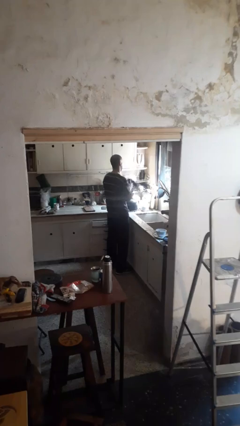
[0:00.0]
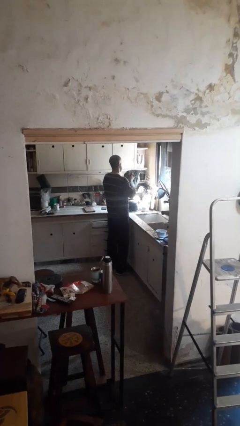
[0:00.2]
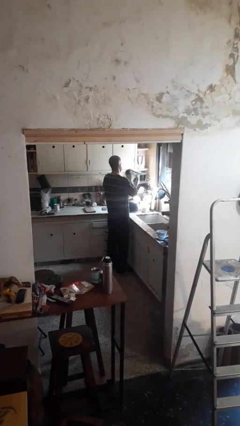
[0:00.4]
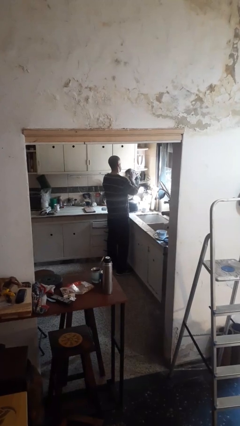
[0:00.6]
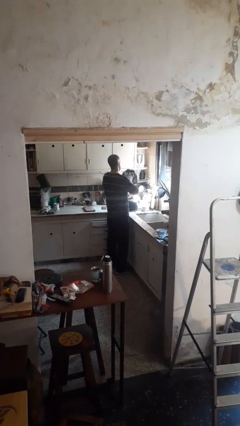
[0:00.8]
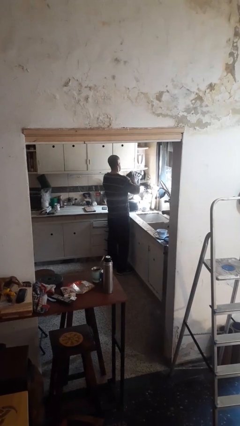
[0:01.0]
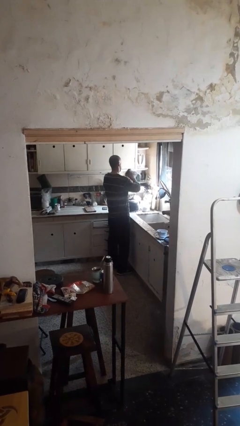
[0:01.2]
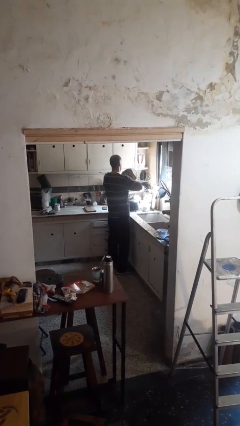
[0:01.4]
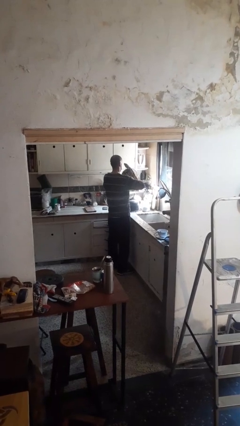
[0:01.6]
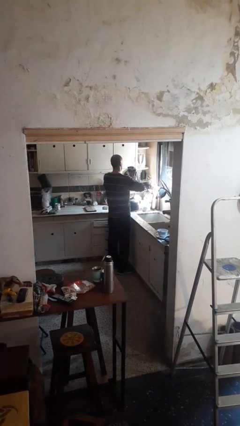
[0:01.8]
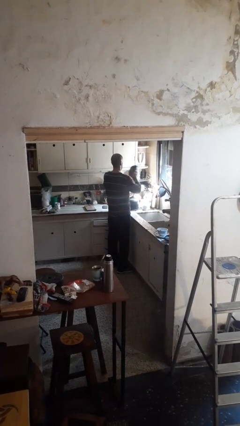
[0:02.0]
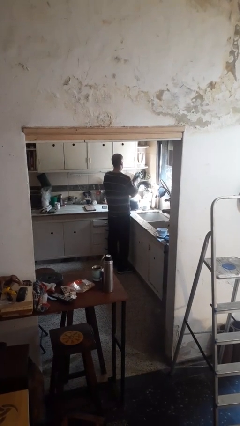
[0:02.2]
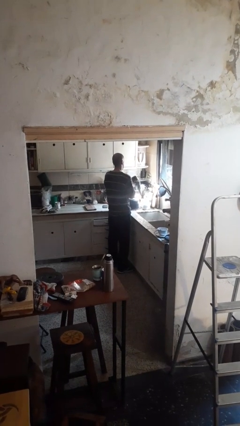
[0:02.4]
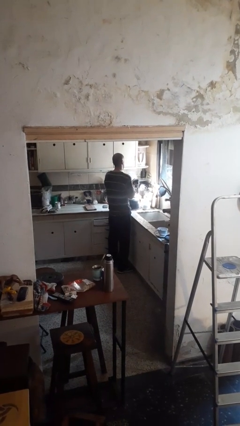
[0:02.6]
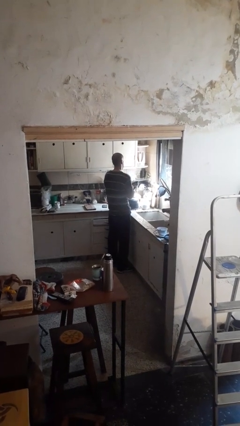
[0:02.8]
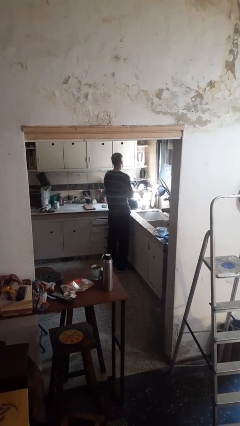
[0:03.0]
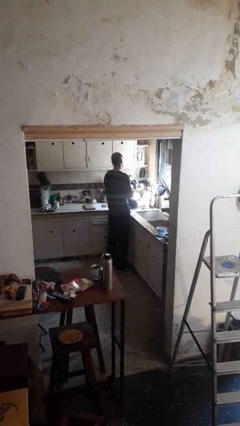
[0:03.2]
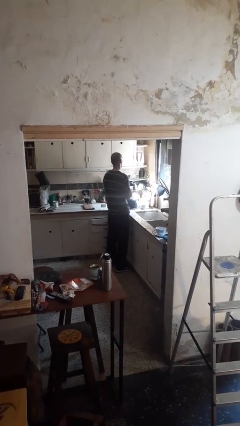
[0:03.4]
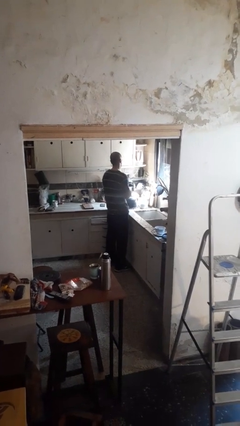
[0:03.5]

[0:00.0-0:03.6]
person dries dish

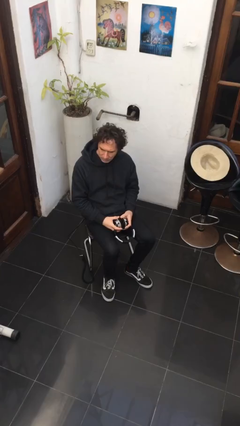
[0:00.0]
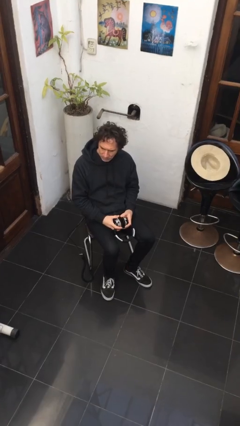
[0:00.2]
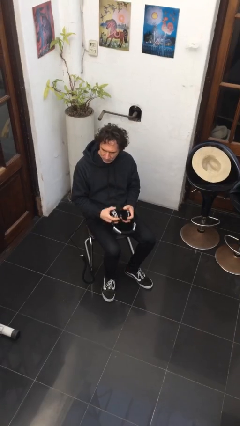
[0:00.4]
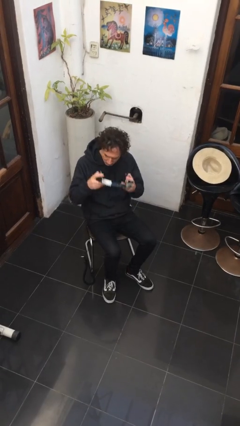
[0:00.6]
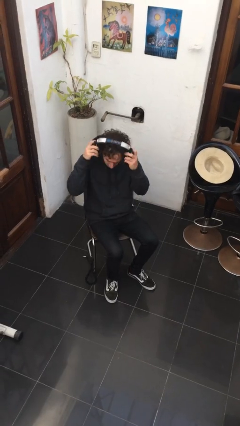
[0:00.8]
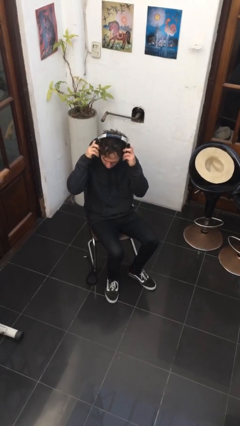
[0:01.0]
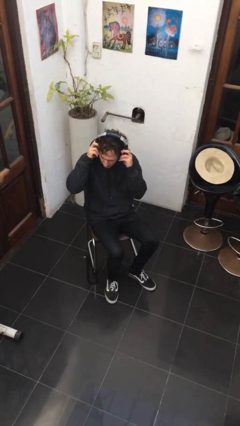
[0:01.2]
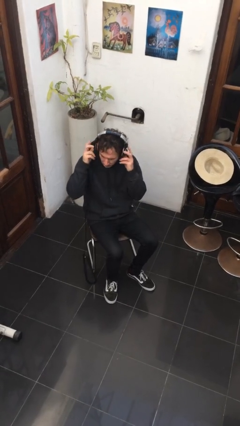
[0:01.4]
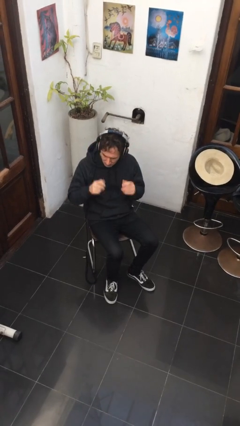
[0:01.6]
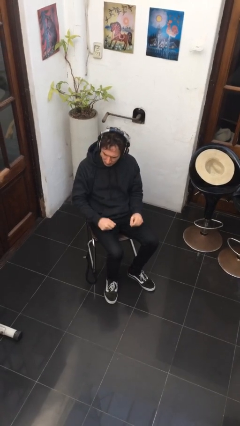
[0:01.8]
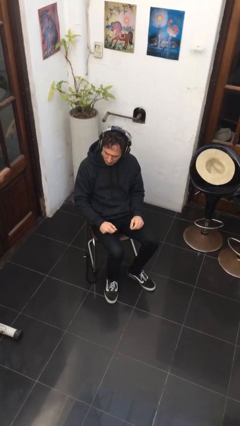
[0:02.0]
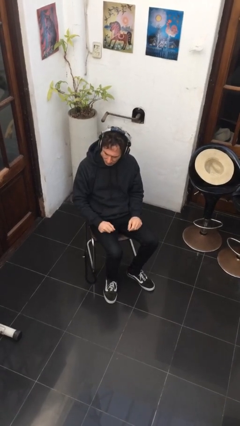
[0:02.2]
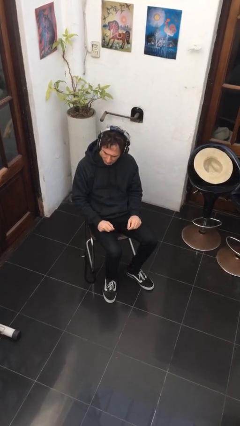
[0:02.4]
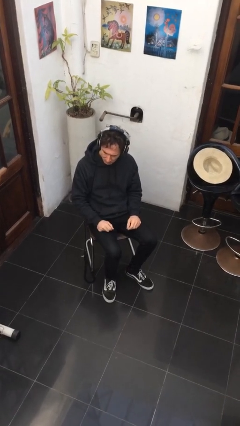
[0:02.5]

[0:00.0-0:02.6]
person puts on headphones

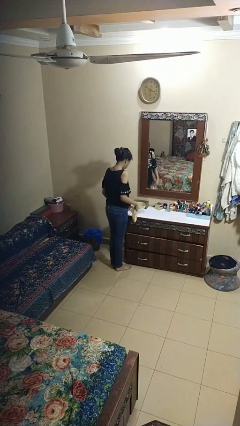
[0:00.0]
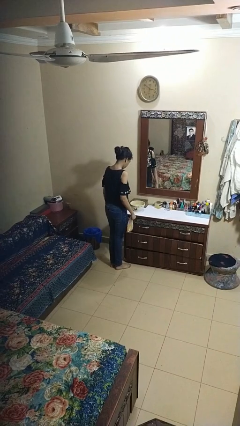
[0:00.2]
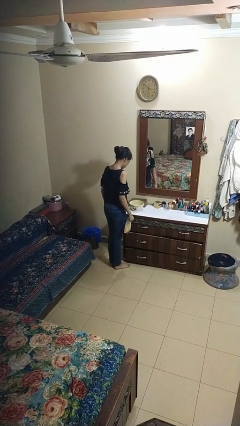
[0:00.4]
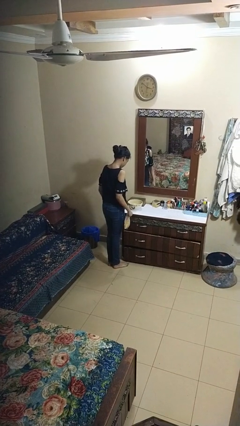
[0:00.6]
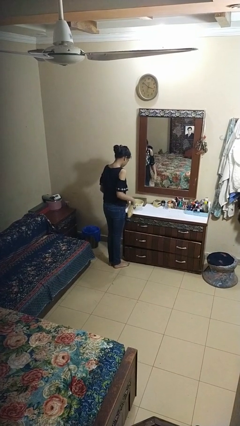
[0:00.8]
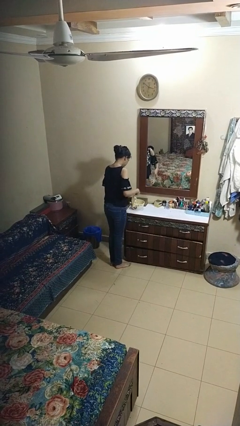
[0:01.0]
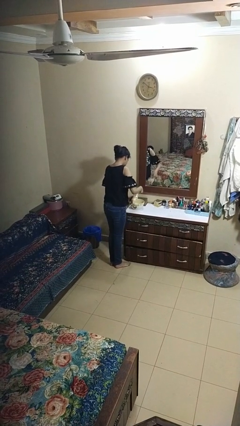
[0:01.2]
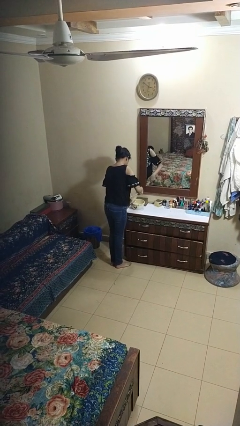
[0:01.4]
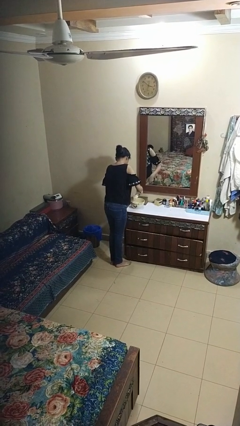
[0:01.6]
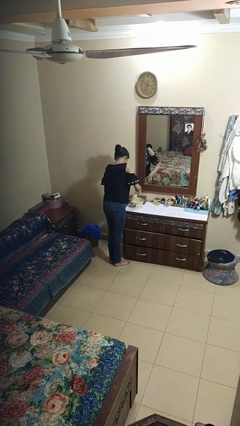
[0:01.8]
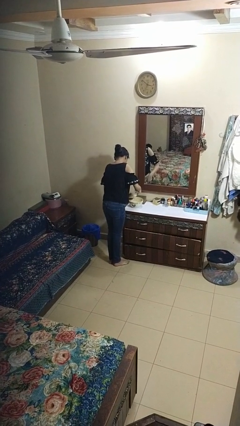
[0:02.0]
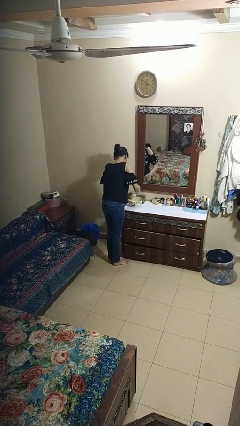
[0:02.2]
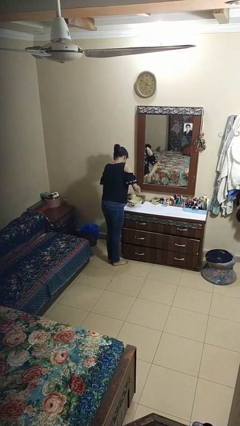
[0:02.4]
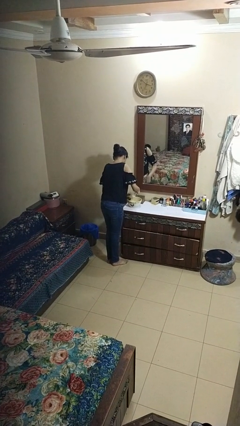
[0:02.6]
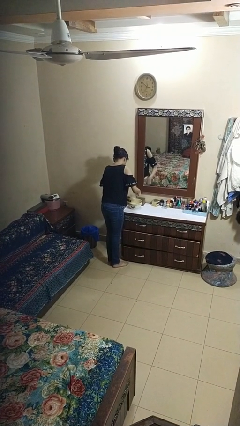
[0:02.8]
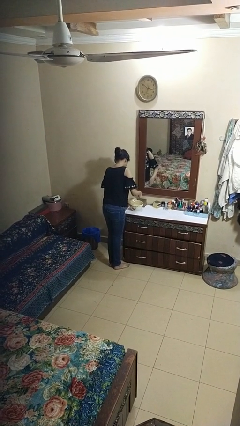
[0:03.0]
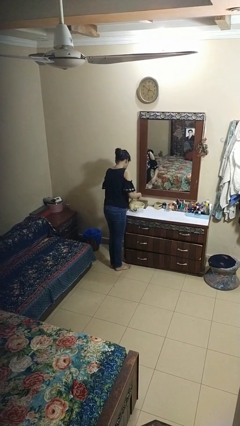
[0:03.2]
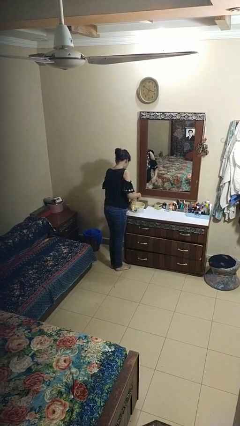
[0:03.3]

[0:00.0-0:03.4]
person pours into bowl

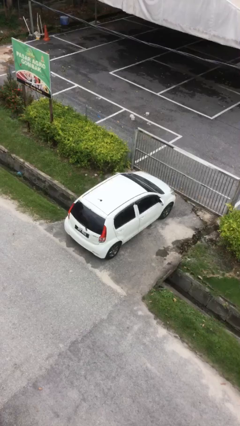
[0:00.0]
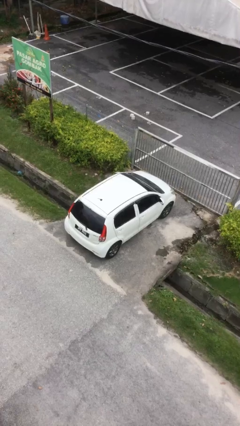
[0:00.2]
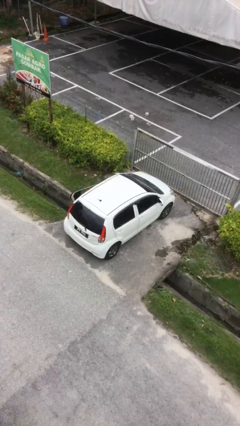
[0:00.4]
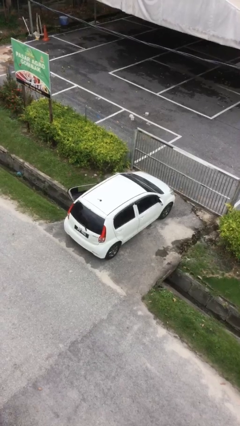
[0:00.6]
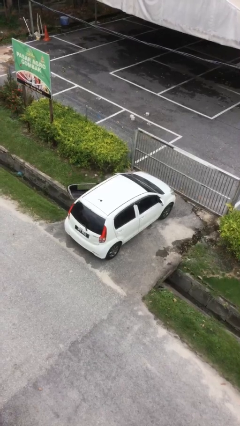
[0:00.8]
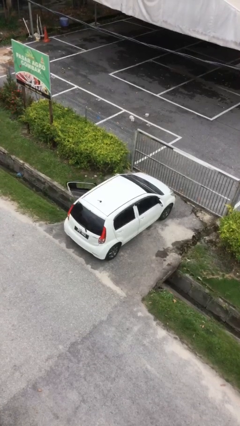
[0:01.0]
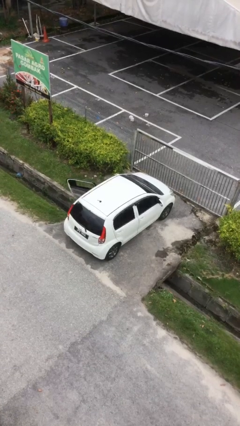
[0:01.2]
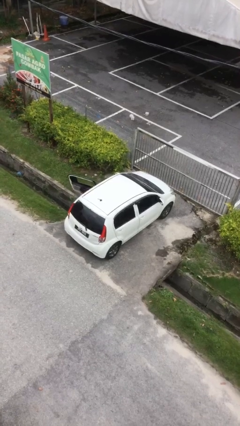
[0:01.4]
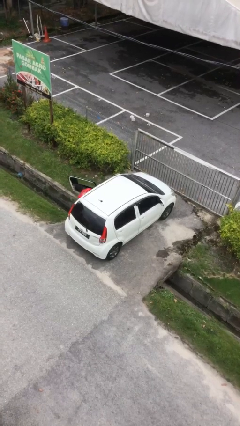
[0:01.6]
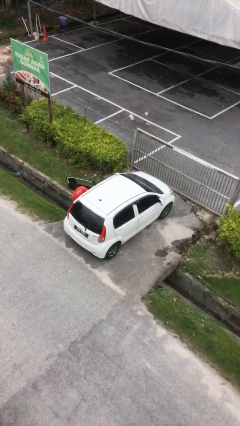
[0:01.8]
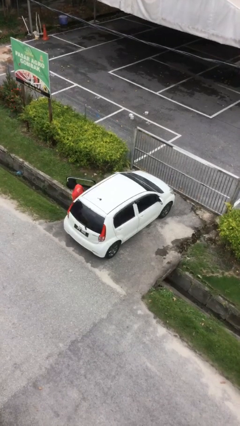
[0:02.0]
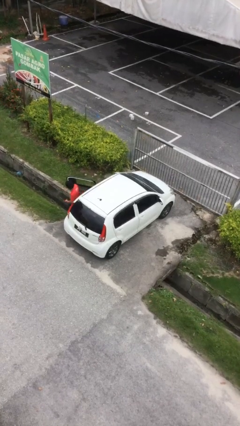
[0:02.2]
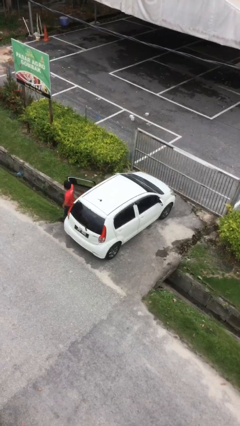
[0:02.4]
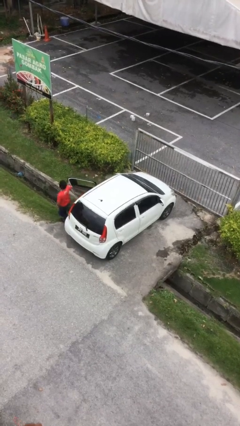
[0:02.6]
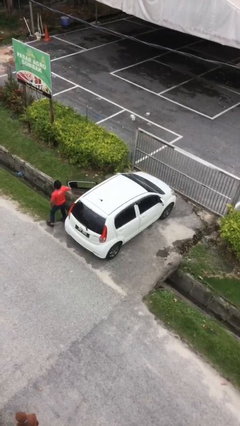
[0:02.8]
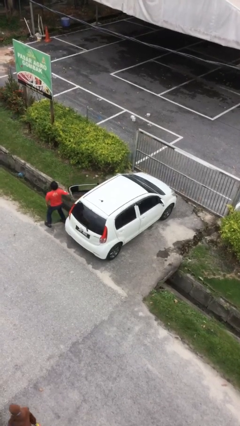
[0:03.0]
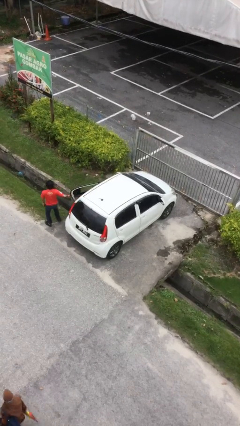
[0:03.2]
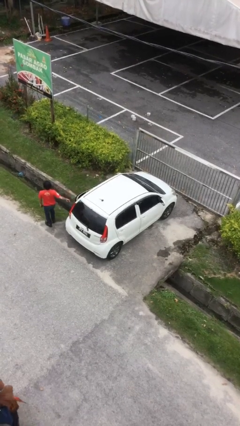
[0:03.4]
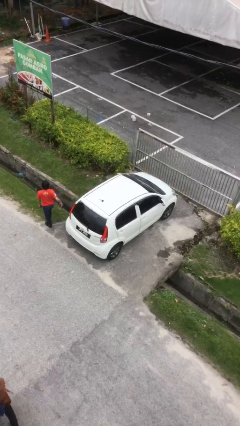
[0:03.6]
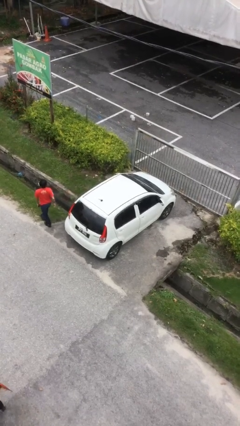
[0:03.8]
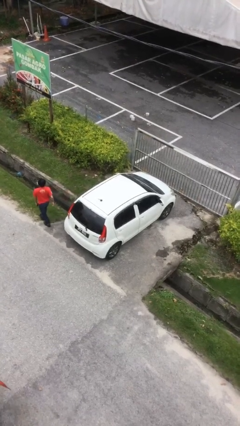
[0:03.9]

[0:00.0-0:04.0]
car drops off person

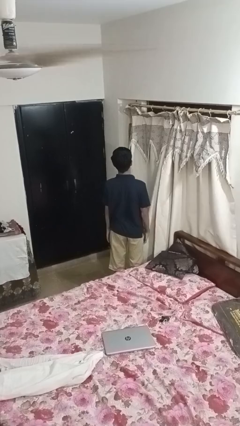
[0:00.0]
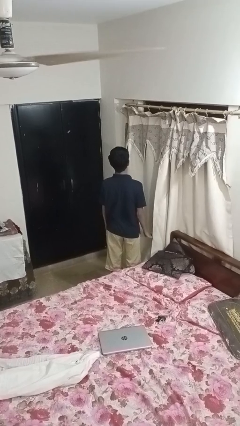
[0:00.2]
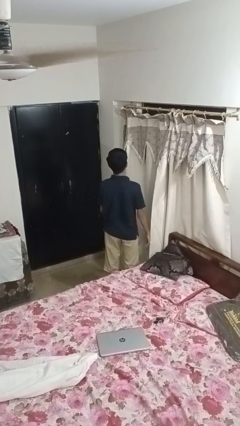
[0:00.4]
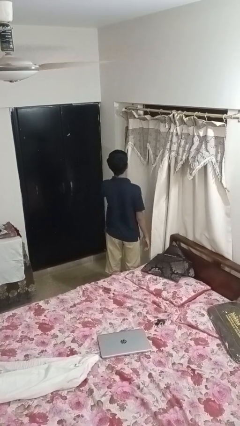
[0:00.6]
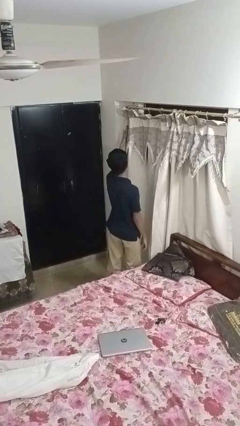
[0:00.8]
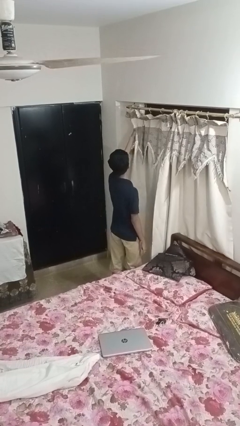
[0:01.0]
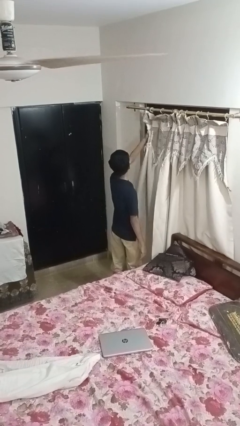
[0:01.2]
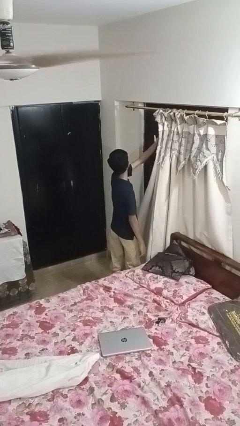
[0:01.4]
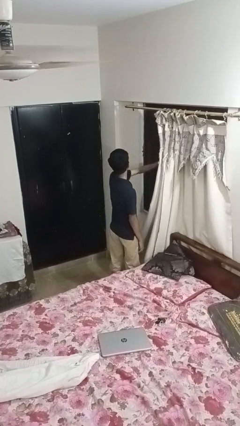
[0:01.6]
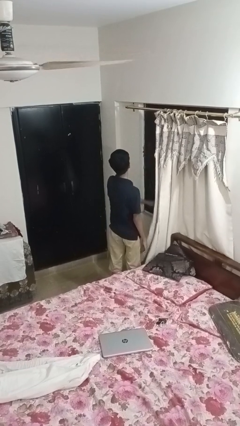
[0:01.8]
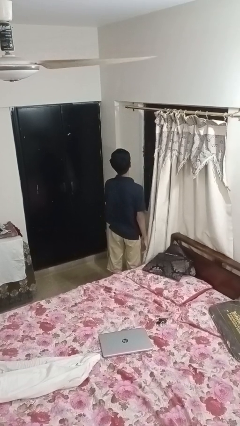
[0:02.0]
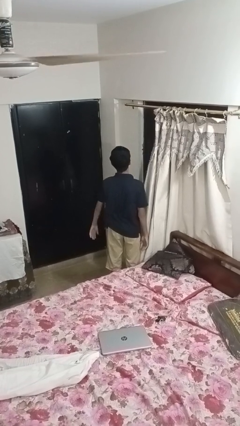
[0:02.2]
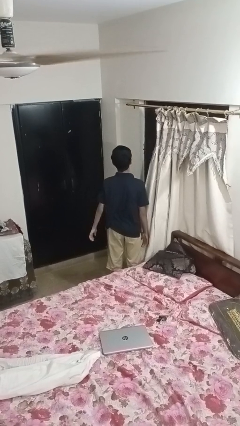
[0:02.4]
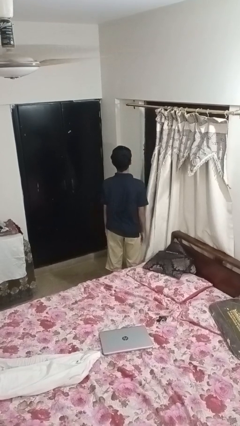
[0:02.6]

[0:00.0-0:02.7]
person opens curtains

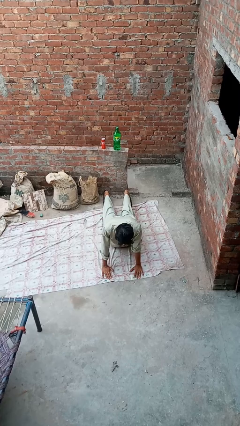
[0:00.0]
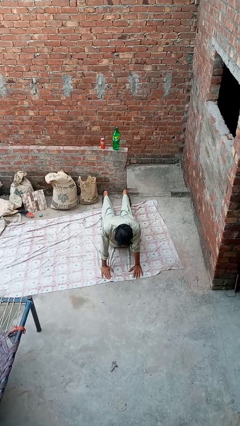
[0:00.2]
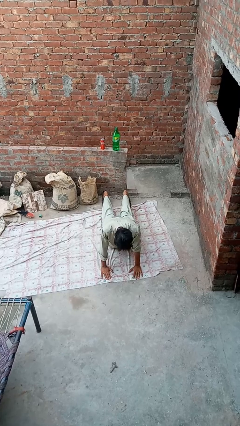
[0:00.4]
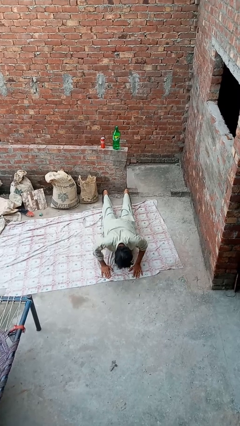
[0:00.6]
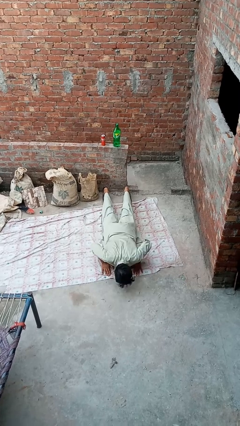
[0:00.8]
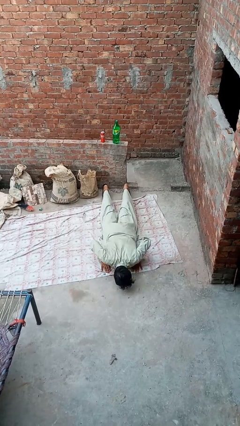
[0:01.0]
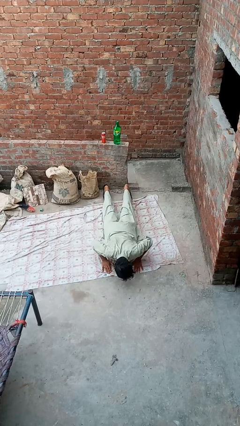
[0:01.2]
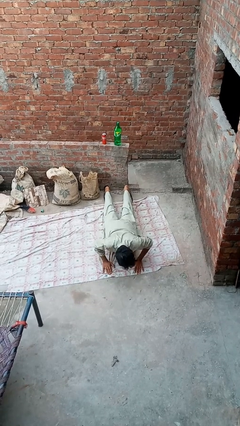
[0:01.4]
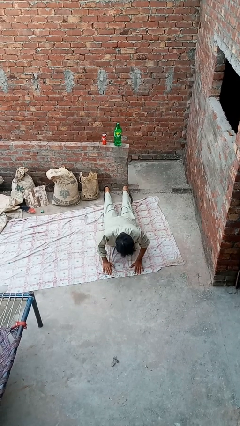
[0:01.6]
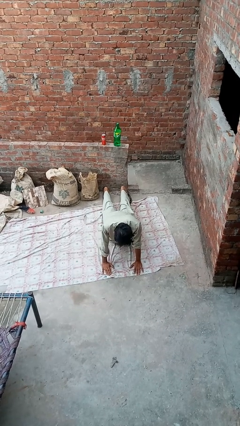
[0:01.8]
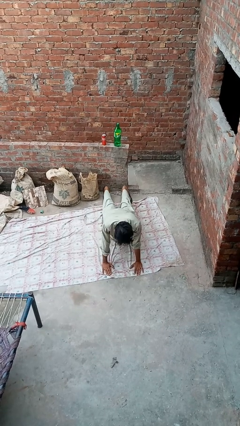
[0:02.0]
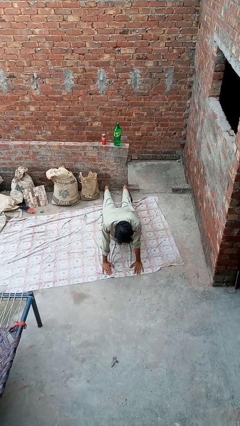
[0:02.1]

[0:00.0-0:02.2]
person exercises with pushup
